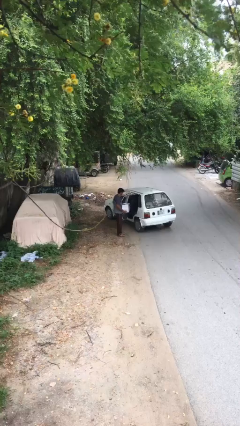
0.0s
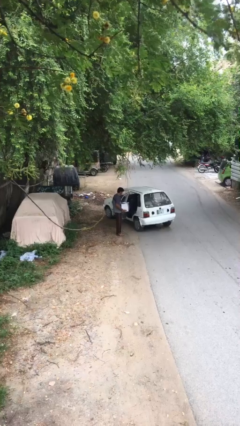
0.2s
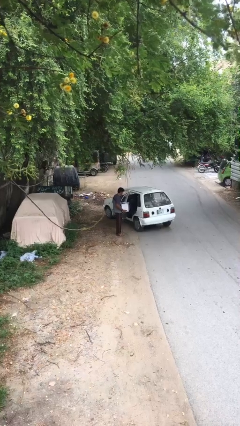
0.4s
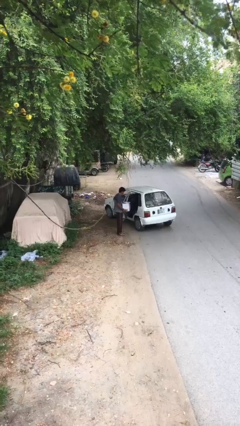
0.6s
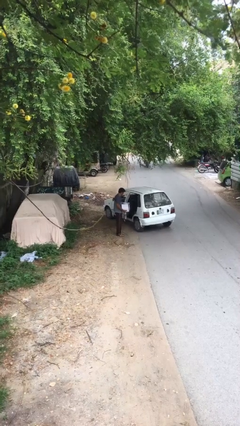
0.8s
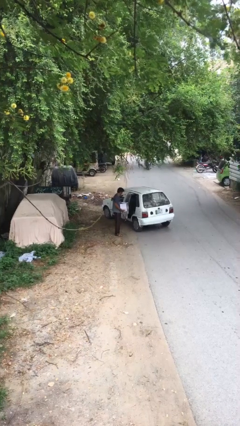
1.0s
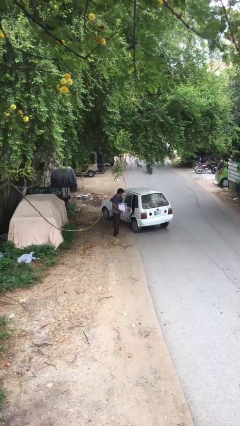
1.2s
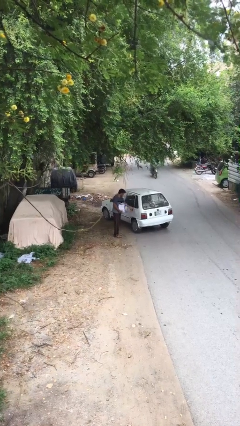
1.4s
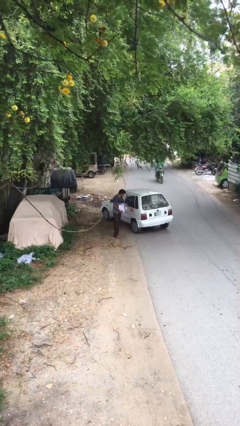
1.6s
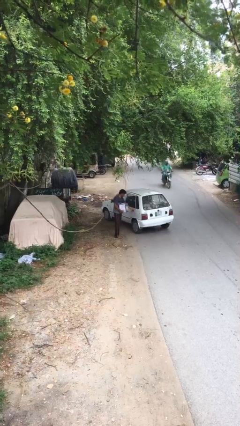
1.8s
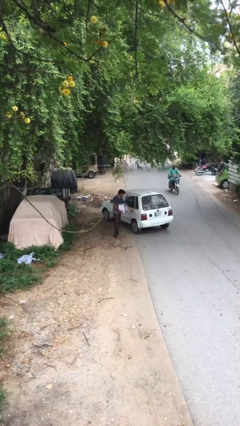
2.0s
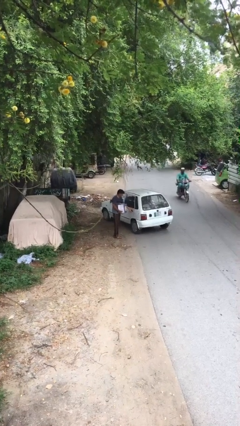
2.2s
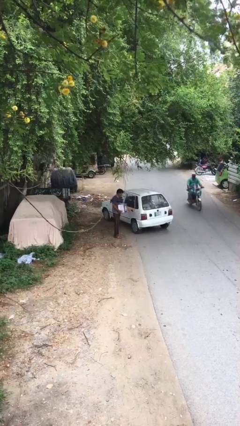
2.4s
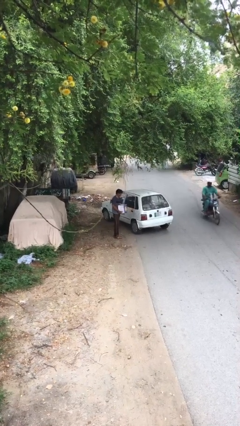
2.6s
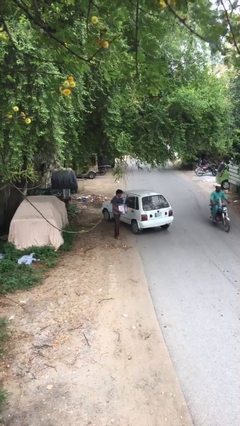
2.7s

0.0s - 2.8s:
person closes car door

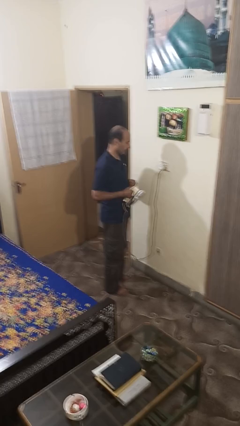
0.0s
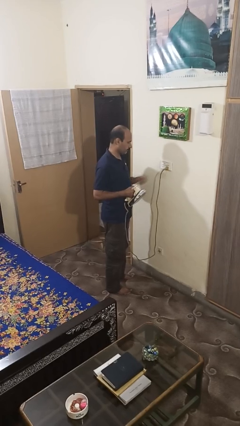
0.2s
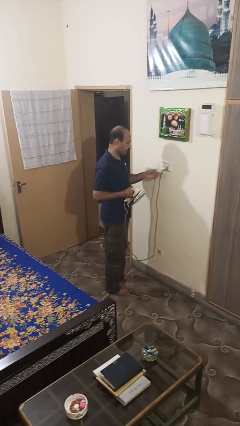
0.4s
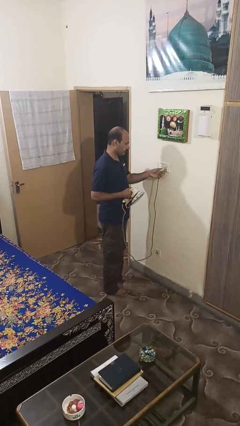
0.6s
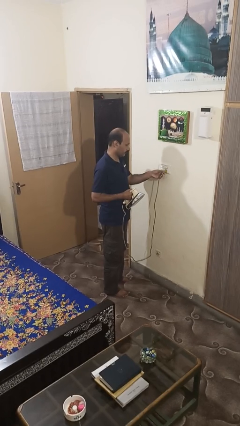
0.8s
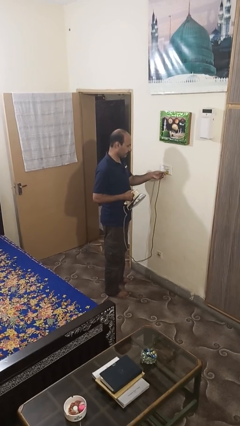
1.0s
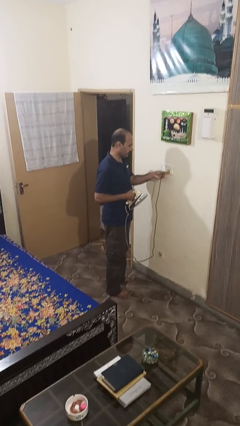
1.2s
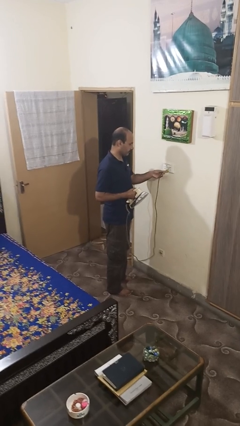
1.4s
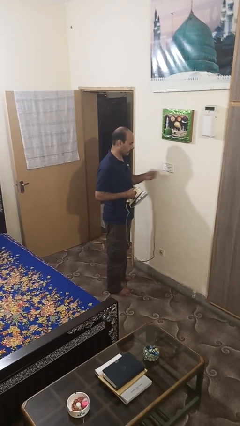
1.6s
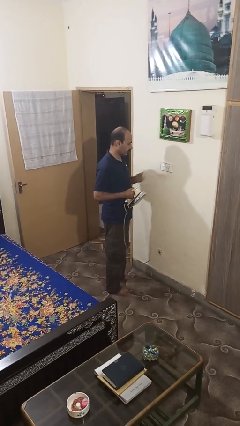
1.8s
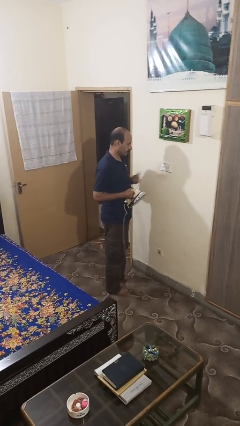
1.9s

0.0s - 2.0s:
person unplugs from electrical socket

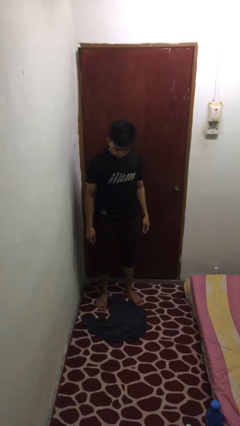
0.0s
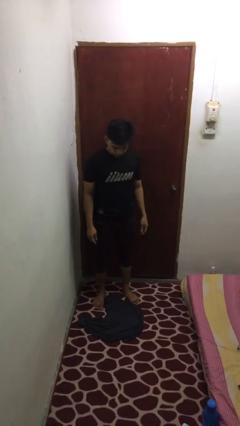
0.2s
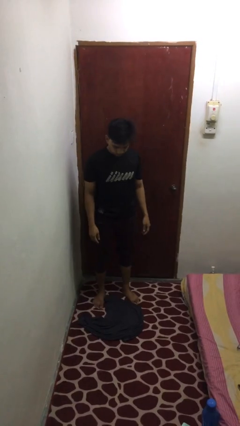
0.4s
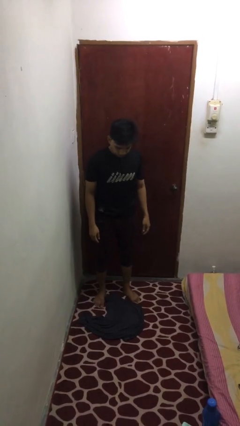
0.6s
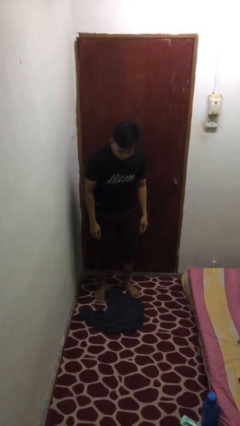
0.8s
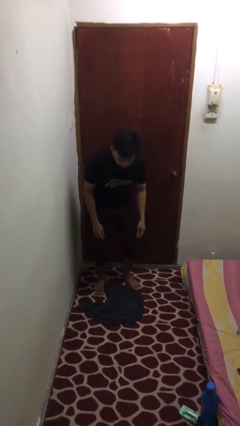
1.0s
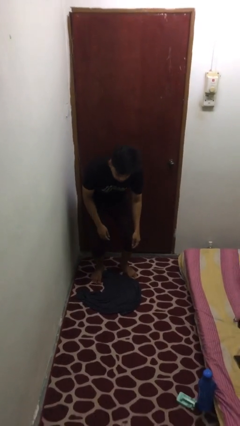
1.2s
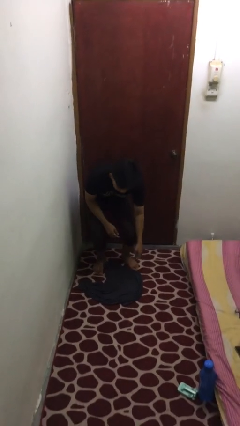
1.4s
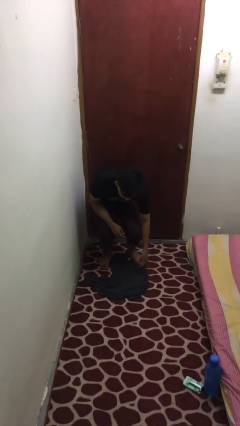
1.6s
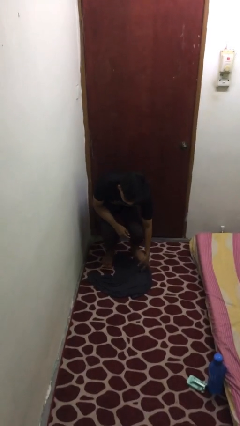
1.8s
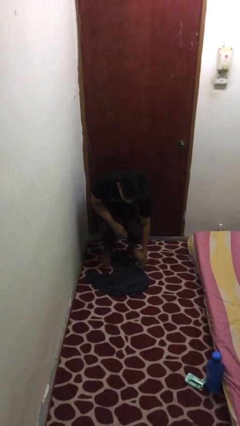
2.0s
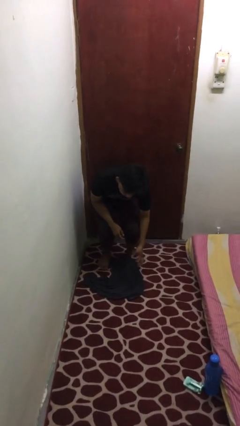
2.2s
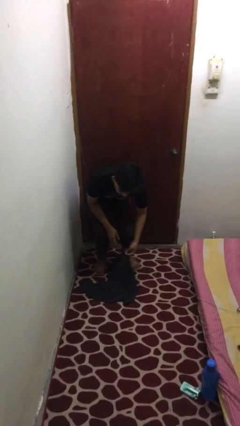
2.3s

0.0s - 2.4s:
person picks up object from floor

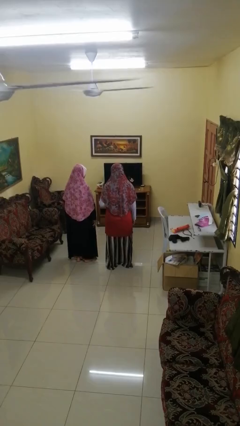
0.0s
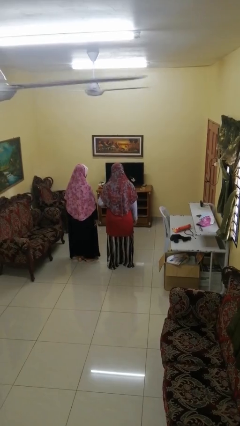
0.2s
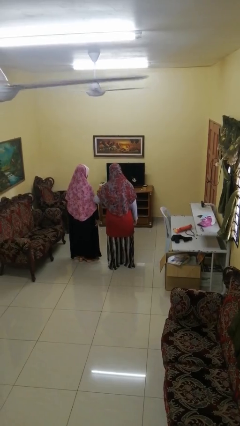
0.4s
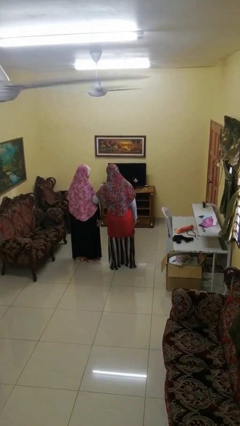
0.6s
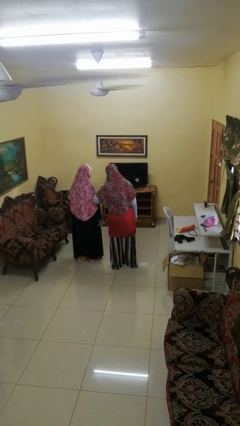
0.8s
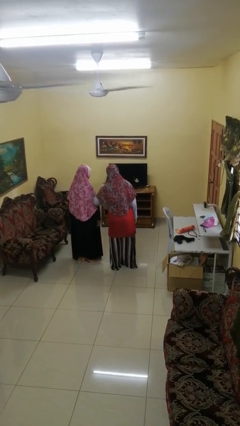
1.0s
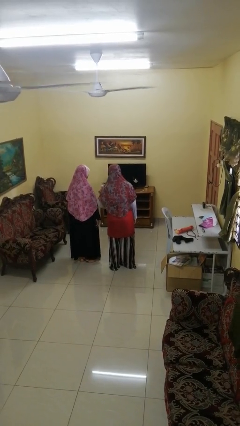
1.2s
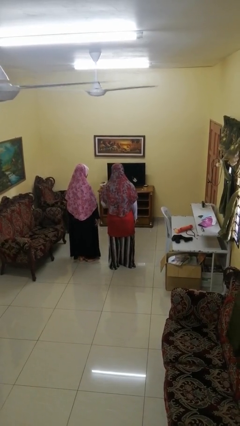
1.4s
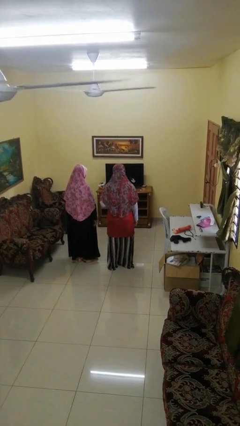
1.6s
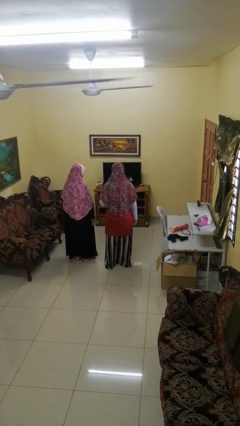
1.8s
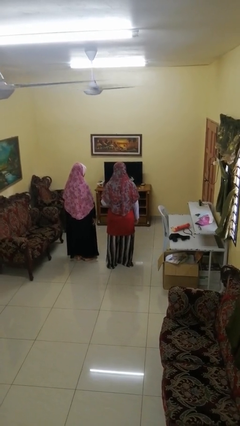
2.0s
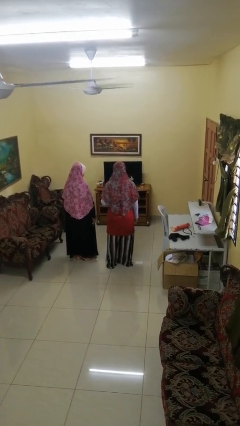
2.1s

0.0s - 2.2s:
person nudges person with elbow

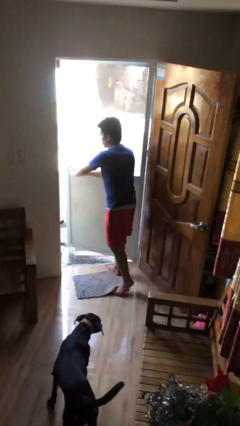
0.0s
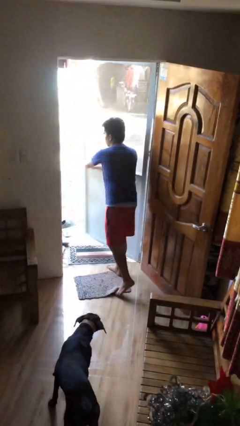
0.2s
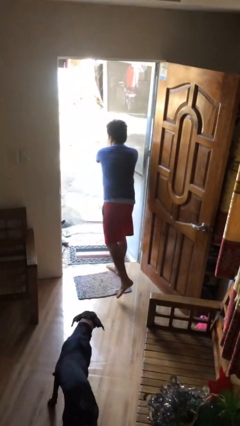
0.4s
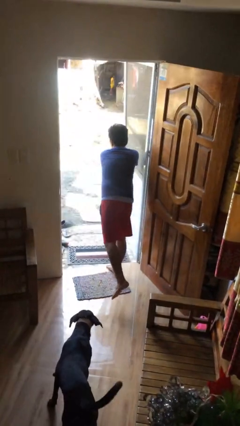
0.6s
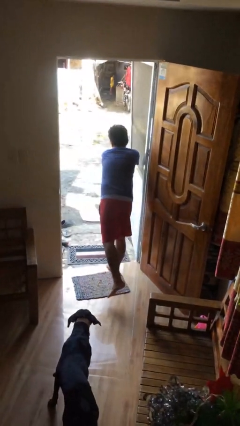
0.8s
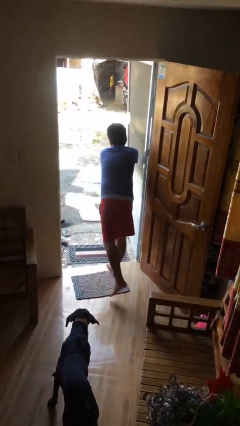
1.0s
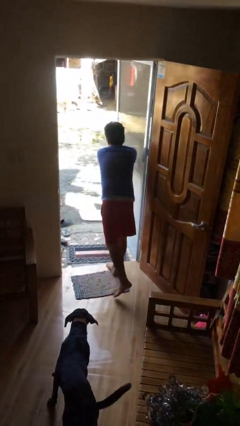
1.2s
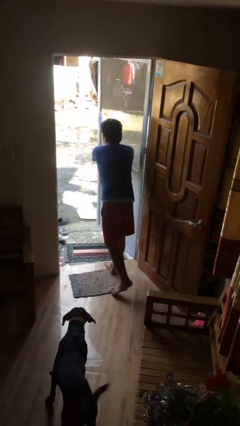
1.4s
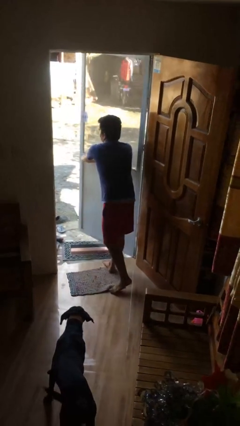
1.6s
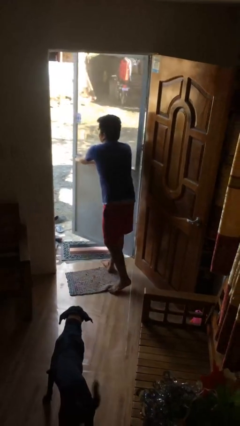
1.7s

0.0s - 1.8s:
person opens facility door

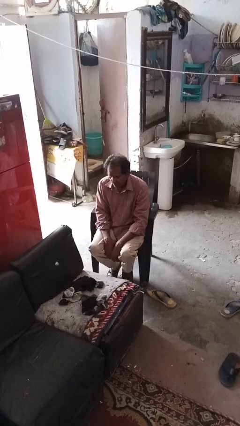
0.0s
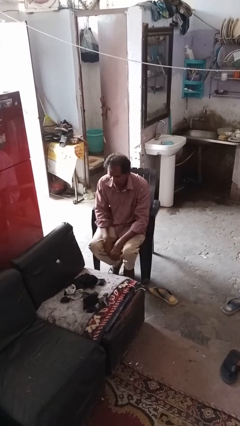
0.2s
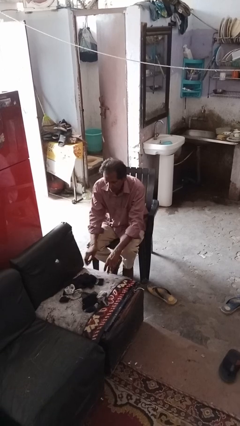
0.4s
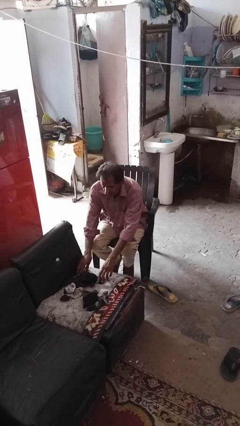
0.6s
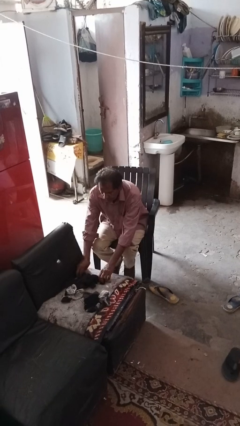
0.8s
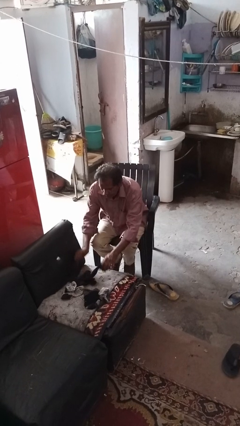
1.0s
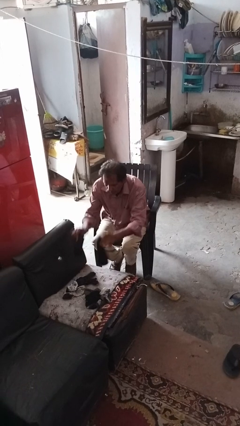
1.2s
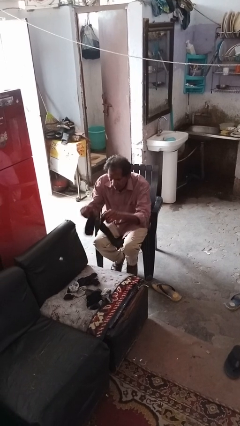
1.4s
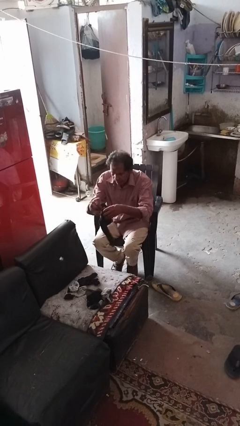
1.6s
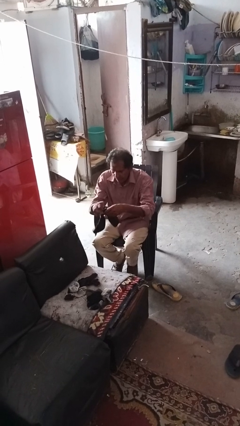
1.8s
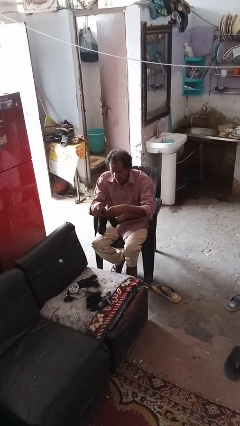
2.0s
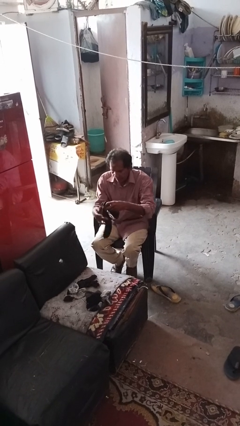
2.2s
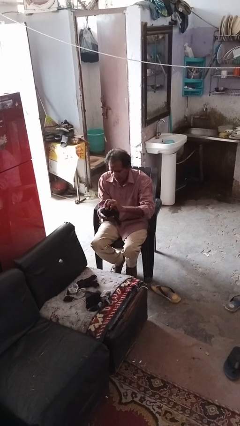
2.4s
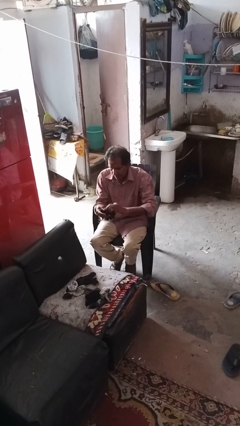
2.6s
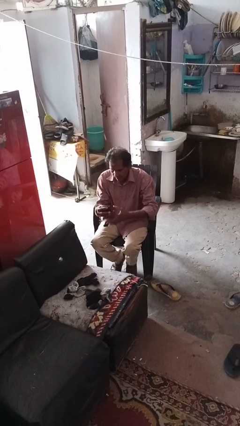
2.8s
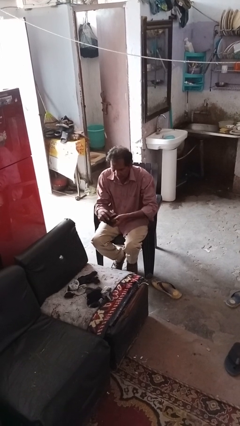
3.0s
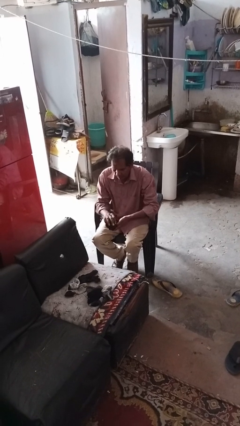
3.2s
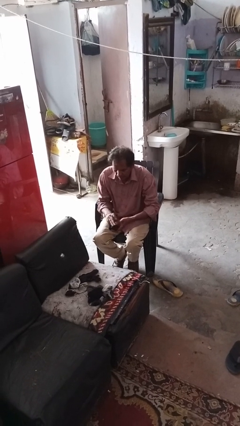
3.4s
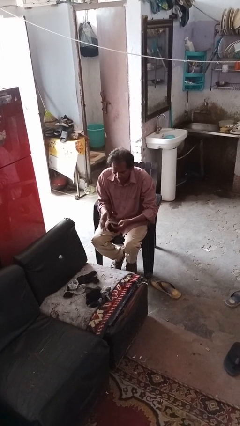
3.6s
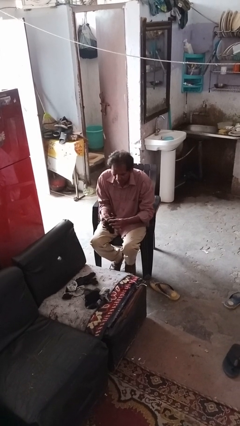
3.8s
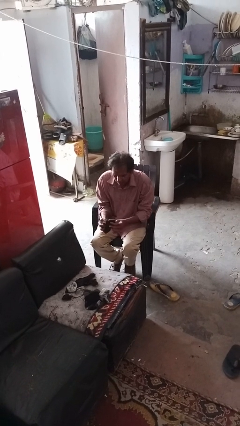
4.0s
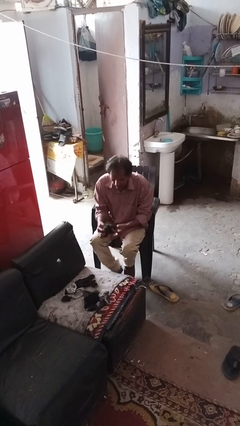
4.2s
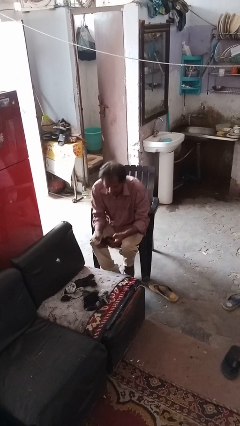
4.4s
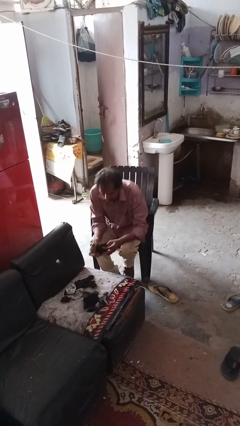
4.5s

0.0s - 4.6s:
person folds socks

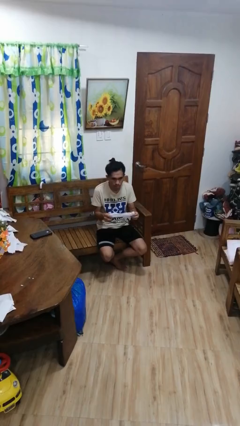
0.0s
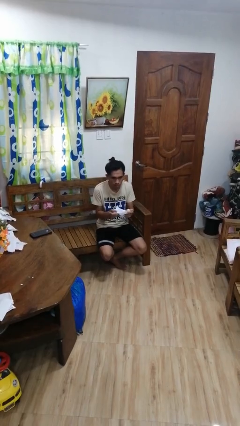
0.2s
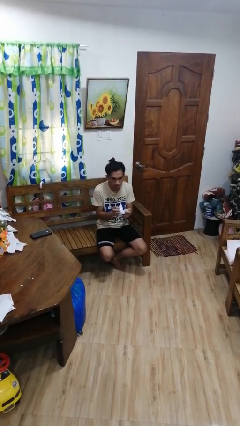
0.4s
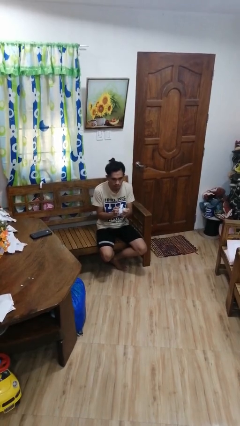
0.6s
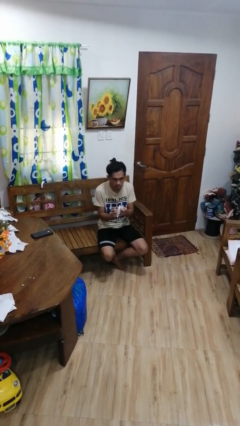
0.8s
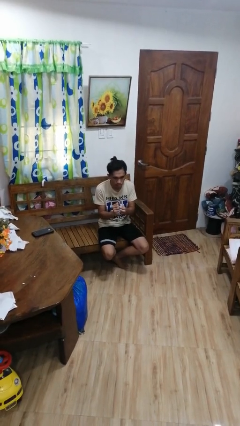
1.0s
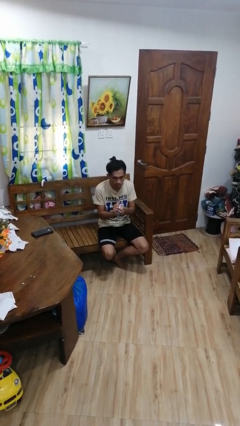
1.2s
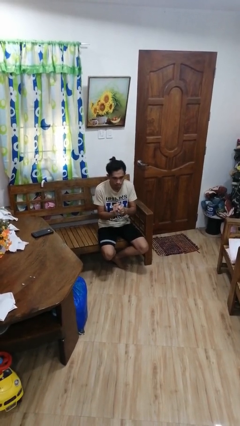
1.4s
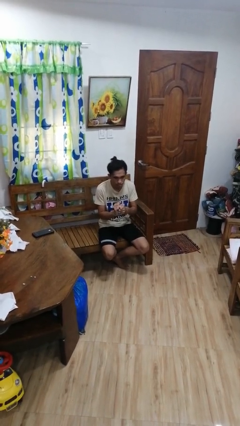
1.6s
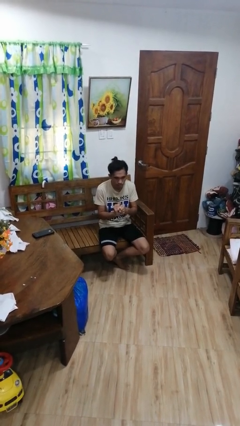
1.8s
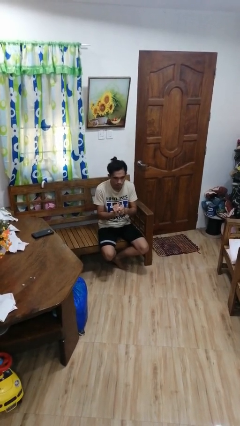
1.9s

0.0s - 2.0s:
person crumples paper
